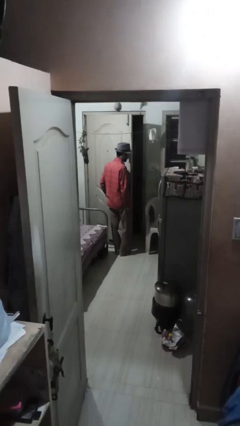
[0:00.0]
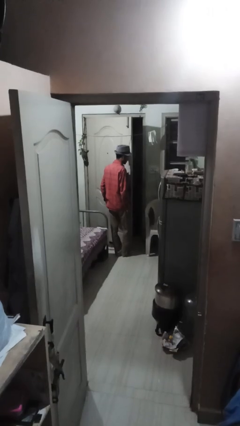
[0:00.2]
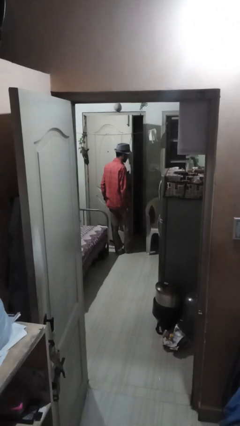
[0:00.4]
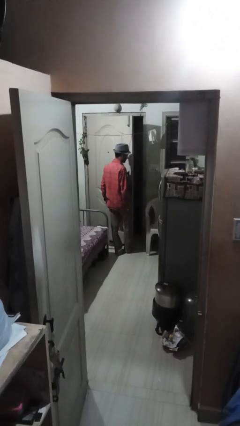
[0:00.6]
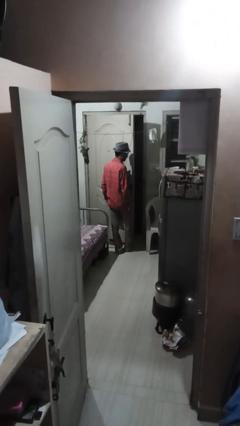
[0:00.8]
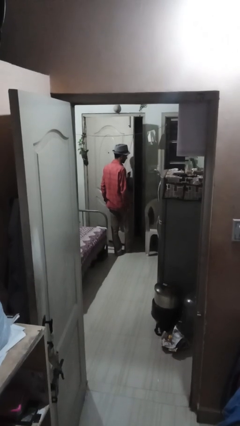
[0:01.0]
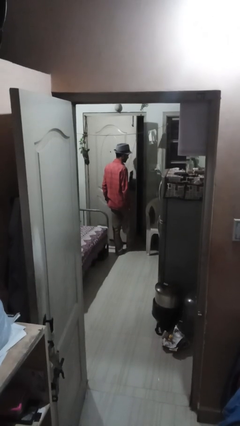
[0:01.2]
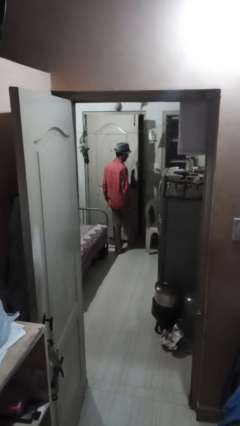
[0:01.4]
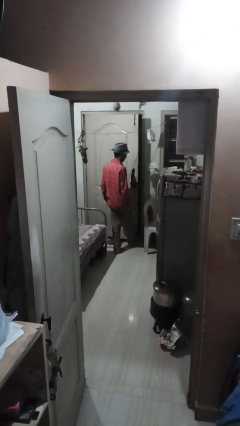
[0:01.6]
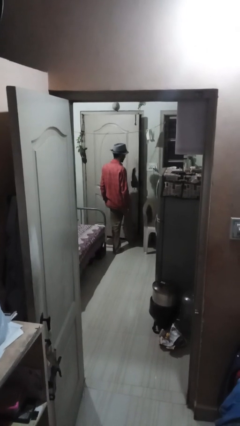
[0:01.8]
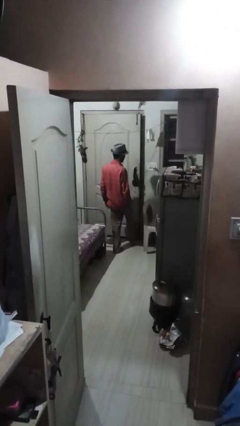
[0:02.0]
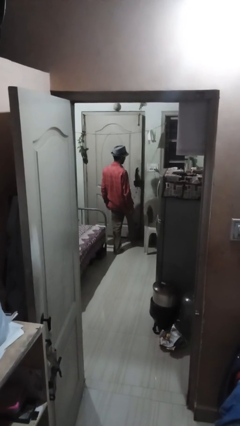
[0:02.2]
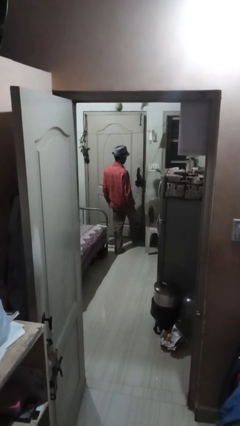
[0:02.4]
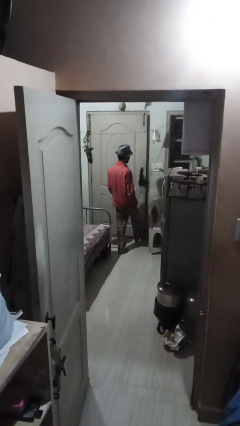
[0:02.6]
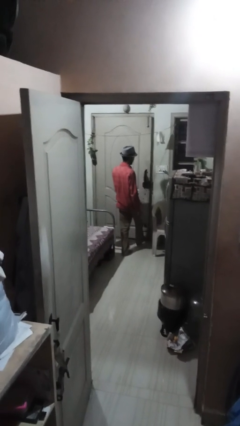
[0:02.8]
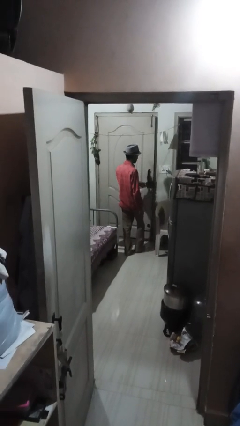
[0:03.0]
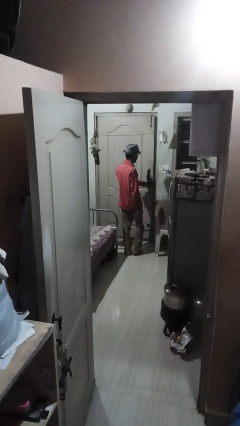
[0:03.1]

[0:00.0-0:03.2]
person closes door with foot

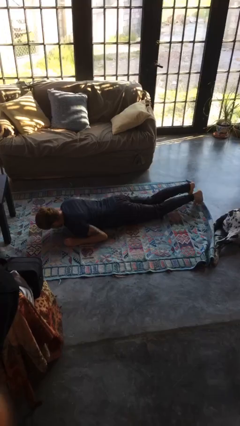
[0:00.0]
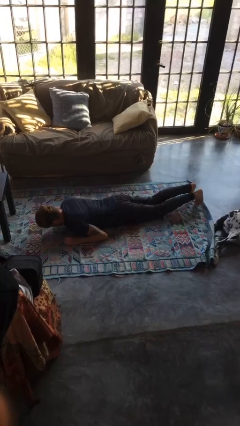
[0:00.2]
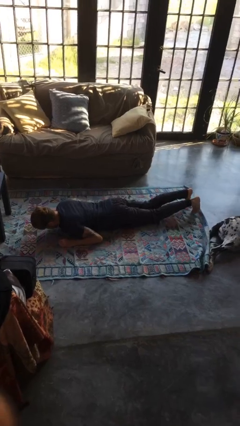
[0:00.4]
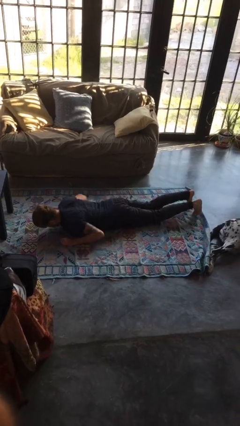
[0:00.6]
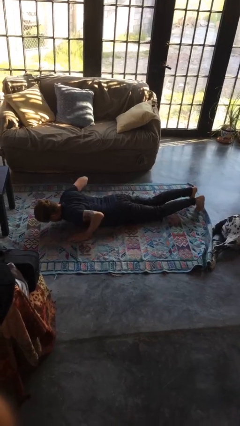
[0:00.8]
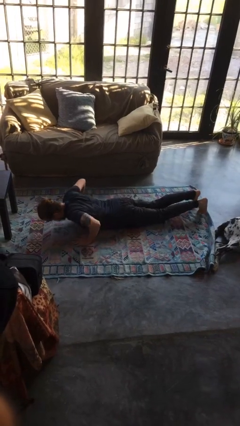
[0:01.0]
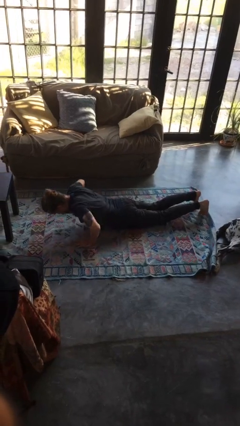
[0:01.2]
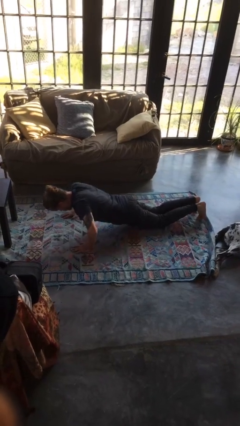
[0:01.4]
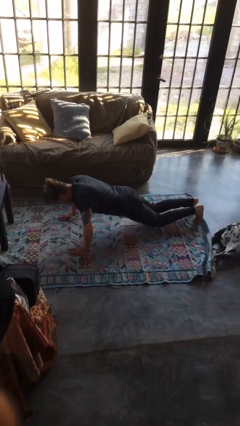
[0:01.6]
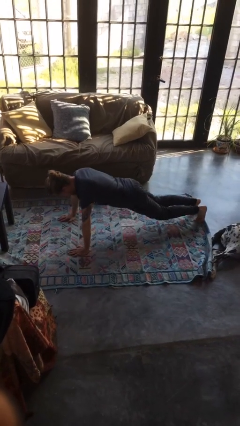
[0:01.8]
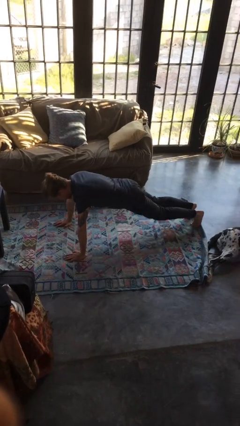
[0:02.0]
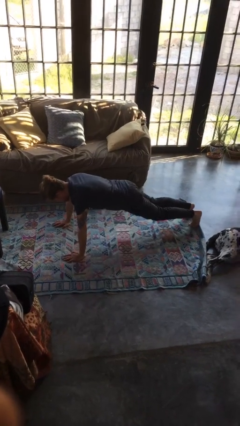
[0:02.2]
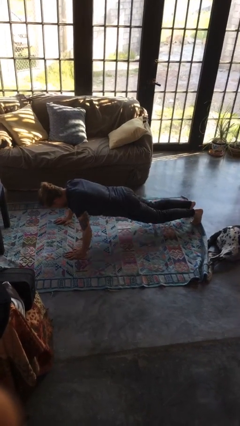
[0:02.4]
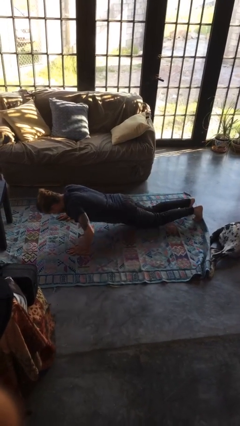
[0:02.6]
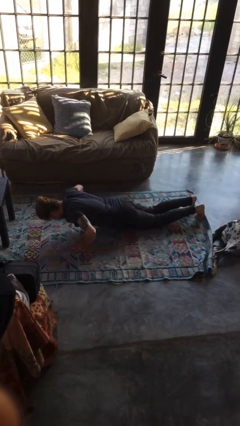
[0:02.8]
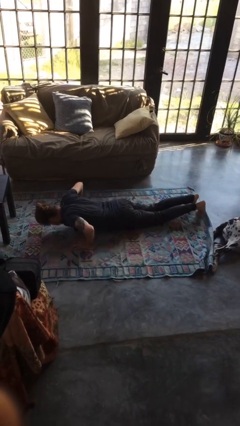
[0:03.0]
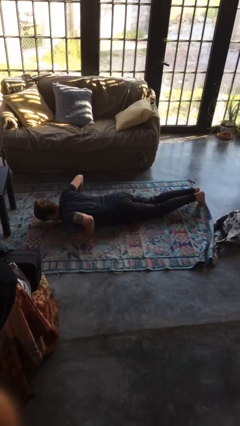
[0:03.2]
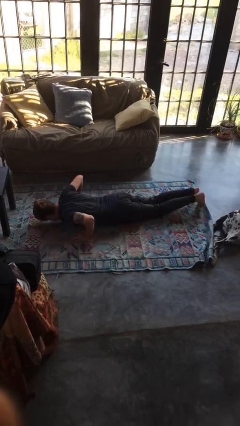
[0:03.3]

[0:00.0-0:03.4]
person exercises with pushup

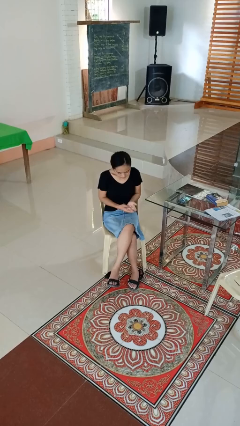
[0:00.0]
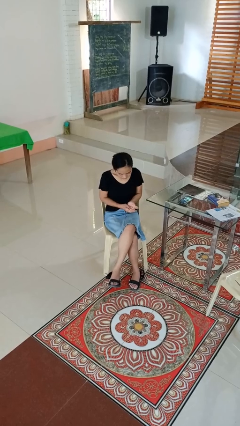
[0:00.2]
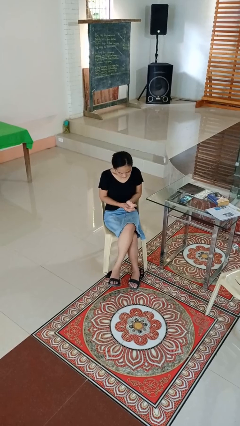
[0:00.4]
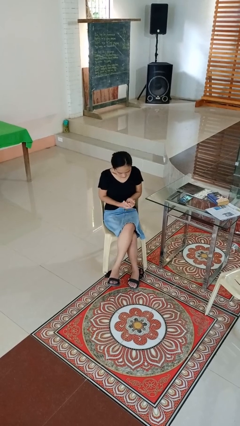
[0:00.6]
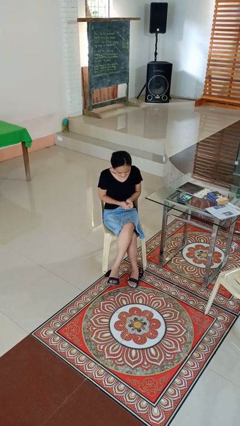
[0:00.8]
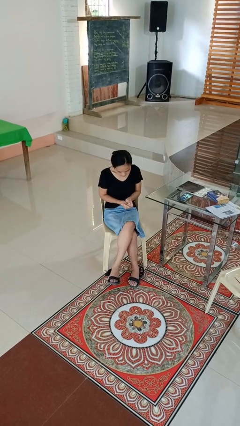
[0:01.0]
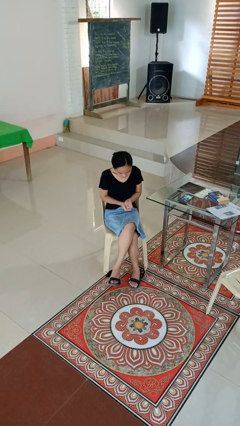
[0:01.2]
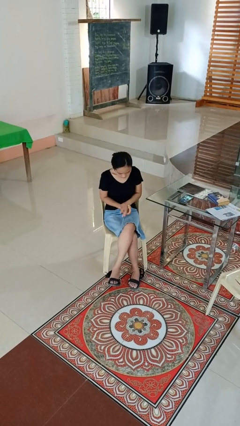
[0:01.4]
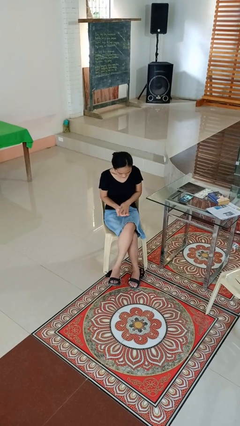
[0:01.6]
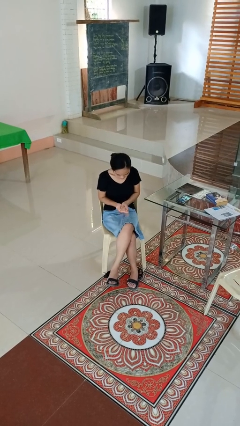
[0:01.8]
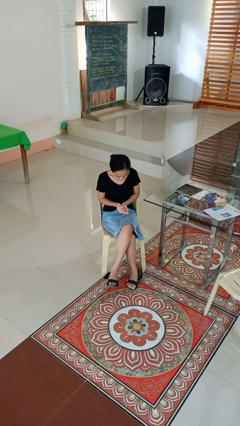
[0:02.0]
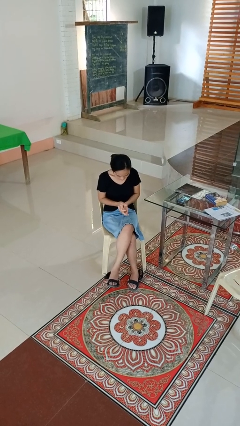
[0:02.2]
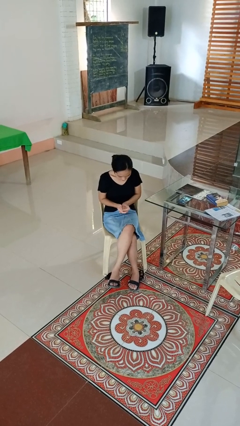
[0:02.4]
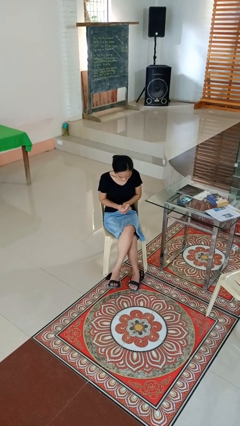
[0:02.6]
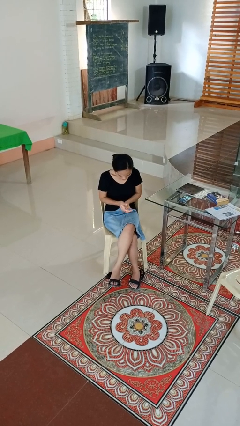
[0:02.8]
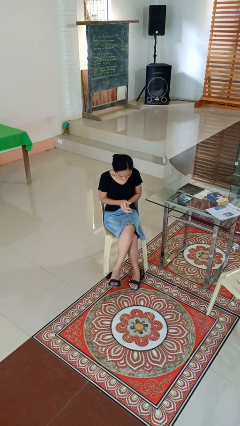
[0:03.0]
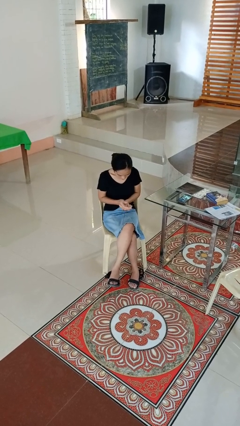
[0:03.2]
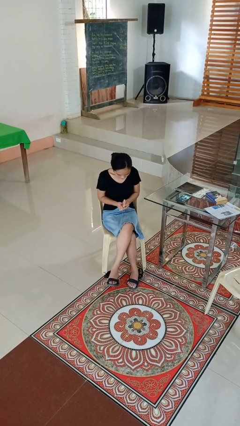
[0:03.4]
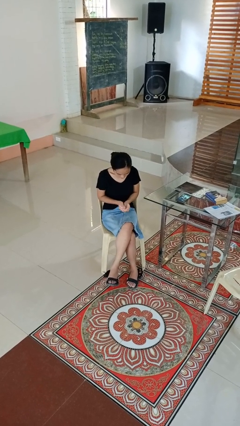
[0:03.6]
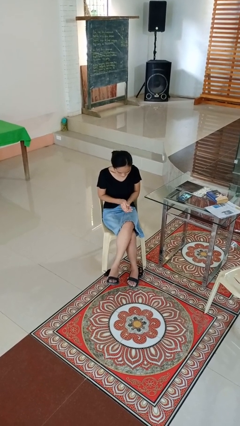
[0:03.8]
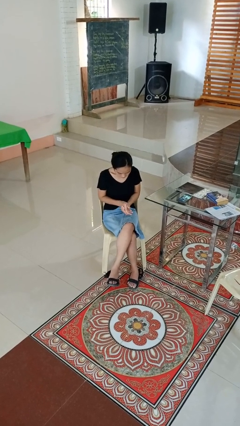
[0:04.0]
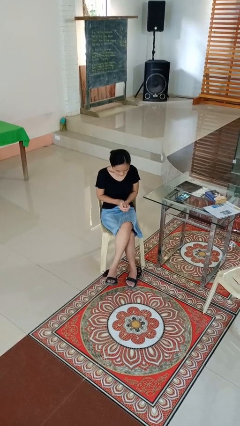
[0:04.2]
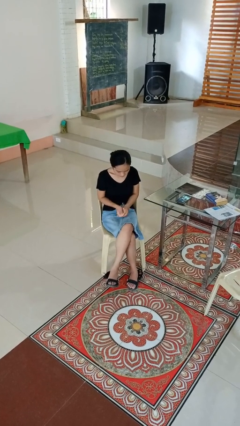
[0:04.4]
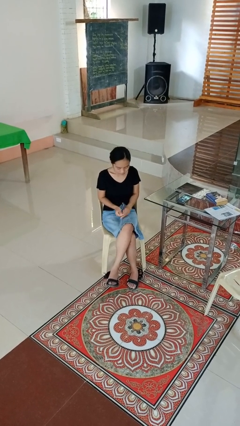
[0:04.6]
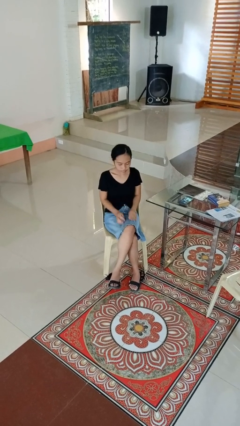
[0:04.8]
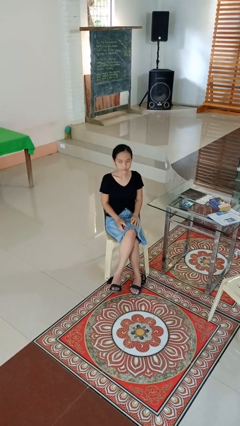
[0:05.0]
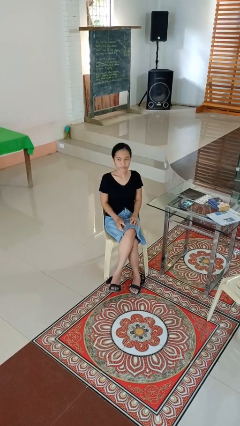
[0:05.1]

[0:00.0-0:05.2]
person looks at hands in lap

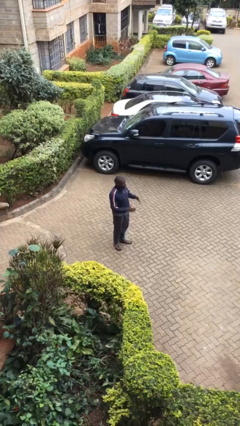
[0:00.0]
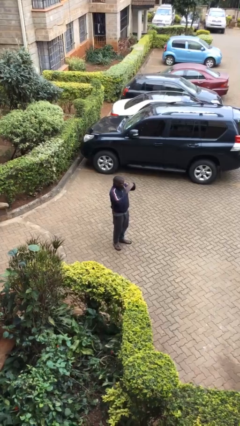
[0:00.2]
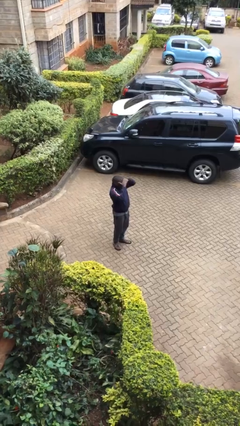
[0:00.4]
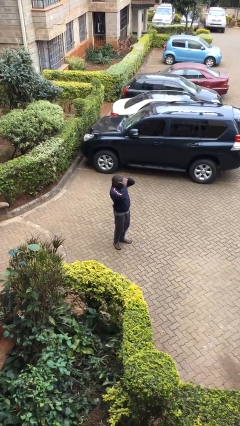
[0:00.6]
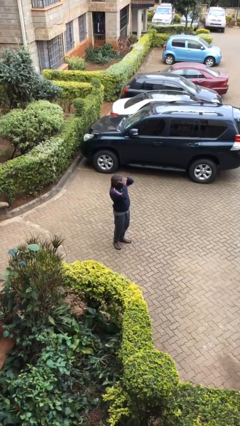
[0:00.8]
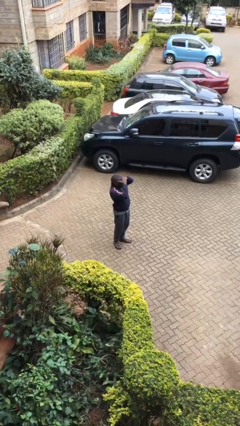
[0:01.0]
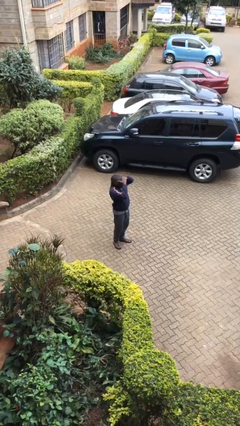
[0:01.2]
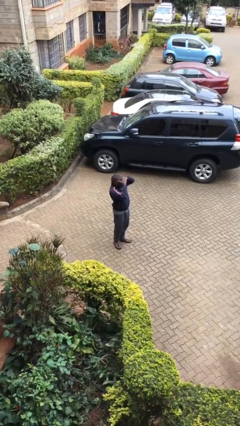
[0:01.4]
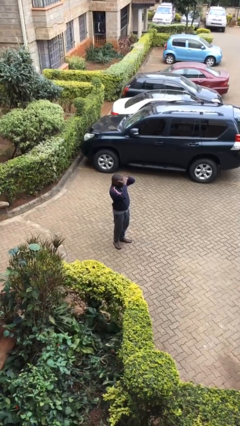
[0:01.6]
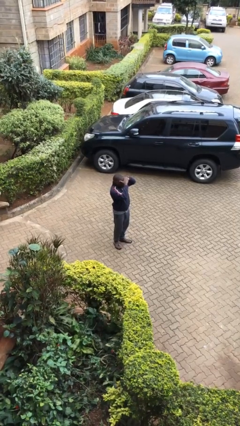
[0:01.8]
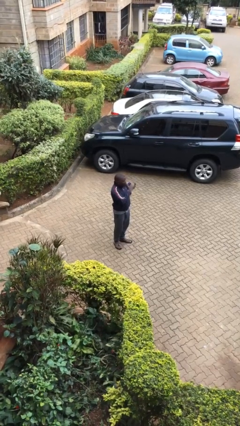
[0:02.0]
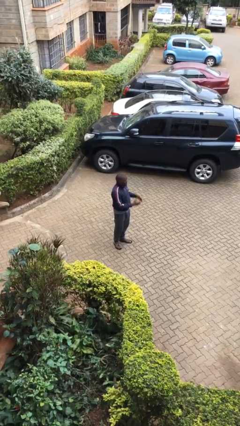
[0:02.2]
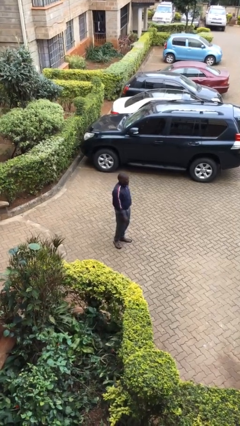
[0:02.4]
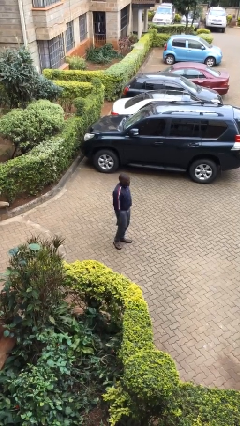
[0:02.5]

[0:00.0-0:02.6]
person shades eyes

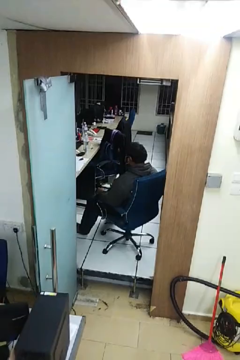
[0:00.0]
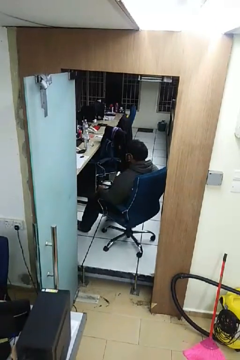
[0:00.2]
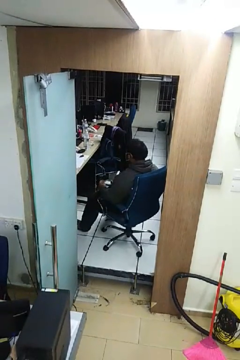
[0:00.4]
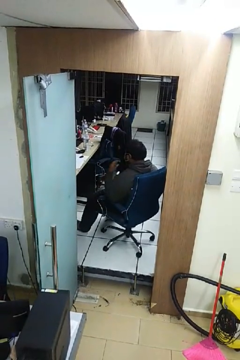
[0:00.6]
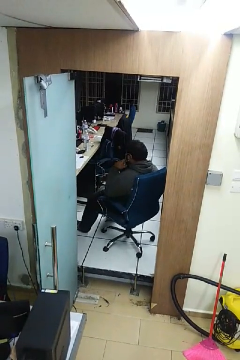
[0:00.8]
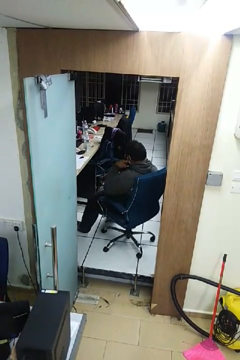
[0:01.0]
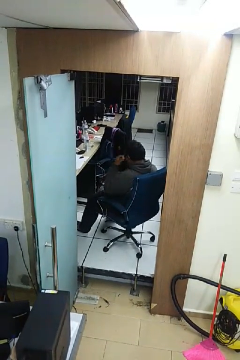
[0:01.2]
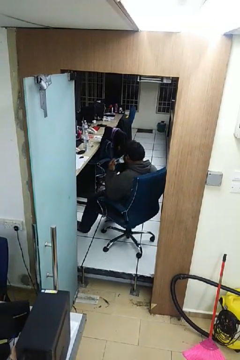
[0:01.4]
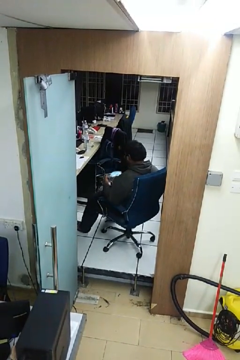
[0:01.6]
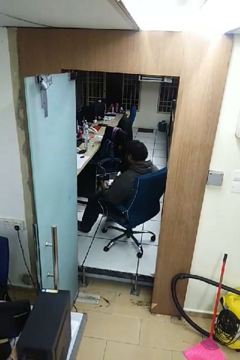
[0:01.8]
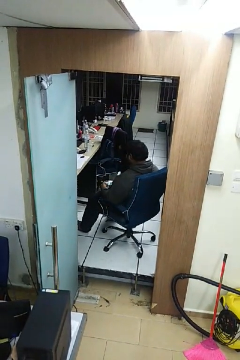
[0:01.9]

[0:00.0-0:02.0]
person takes off facemask

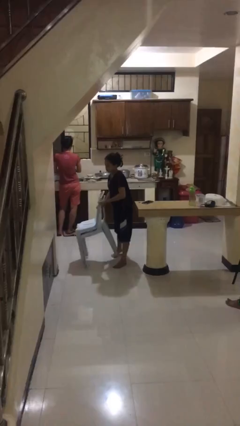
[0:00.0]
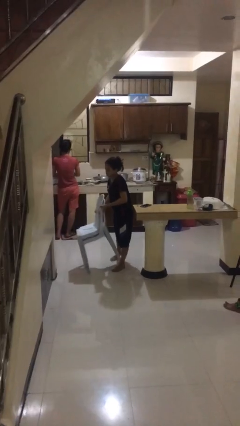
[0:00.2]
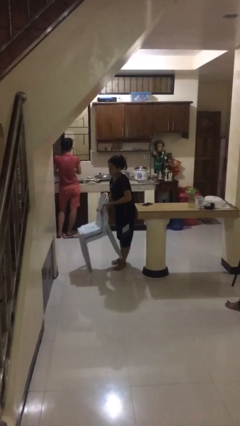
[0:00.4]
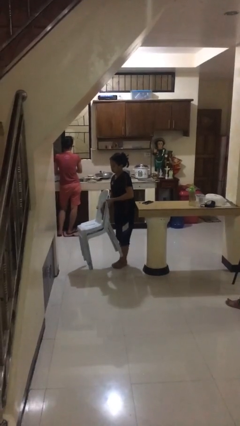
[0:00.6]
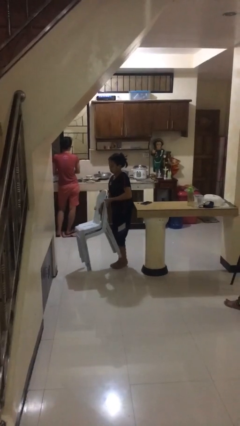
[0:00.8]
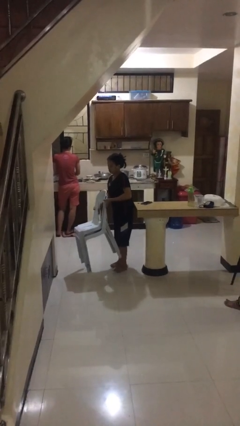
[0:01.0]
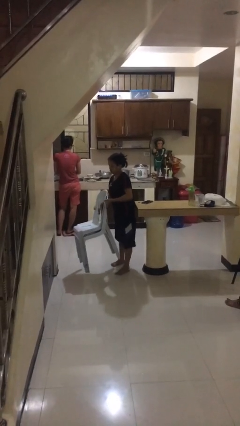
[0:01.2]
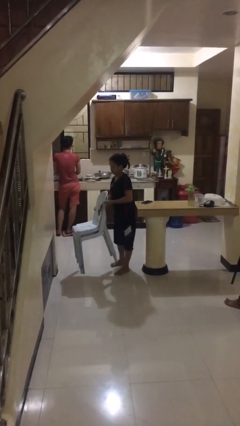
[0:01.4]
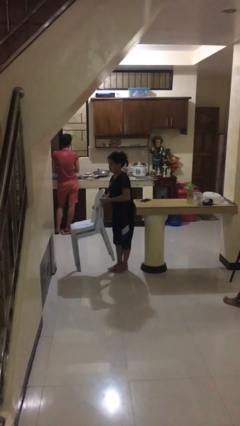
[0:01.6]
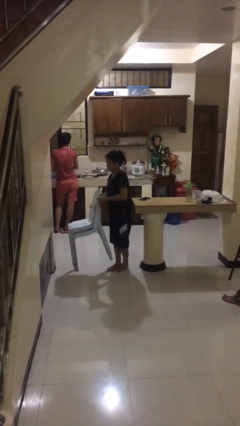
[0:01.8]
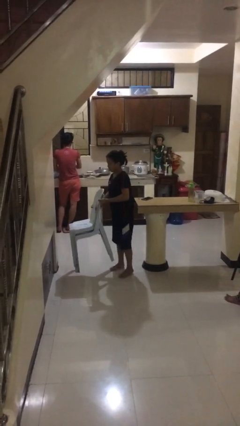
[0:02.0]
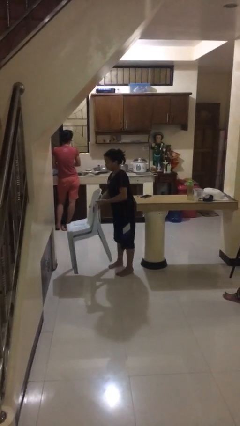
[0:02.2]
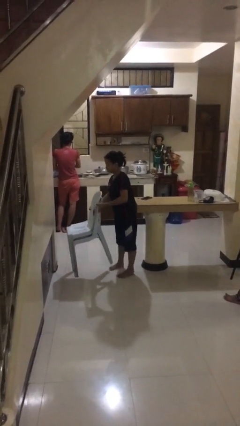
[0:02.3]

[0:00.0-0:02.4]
person carries heavy object
